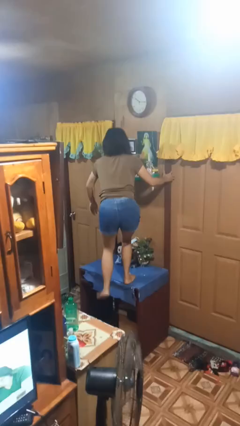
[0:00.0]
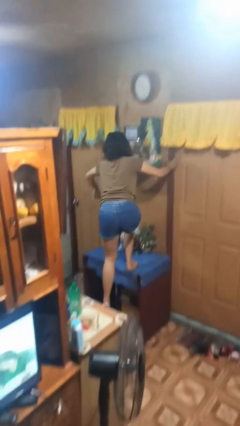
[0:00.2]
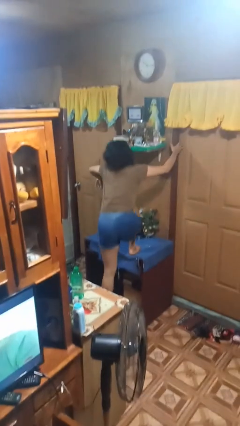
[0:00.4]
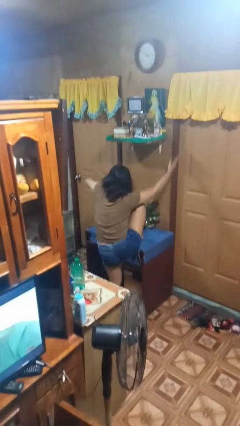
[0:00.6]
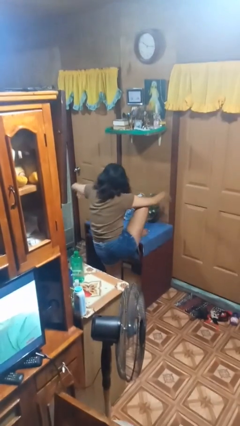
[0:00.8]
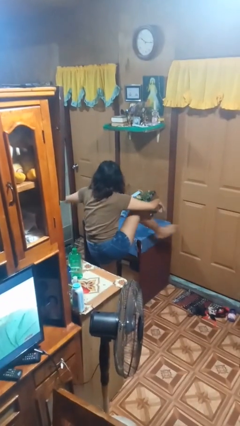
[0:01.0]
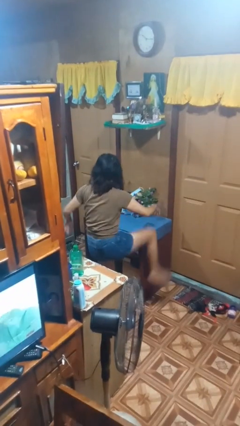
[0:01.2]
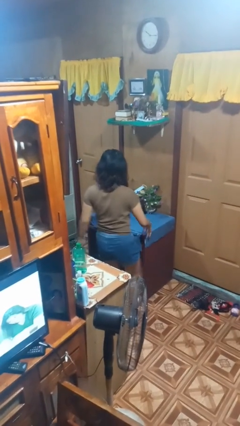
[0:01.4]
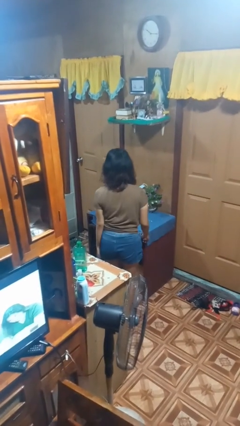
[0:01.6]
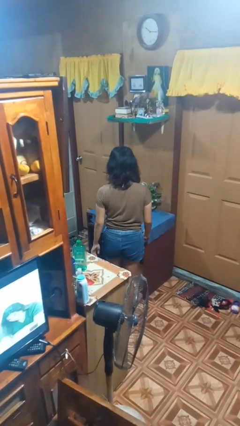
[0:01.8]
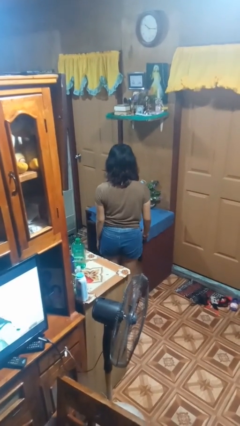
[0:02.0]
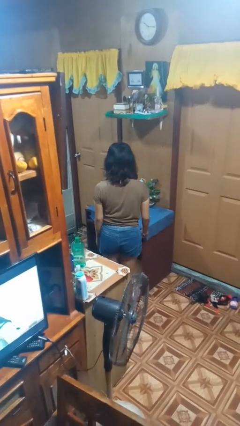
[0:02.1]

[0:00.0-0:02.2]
person climbs off table

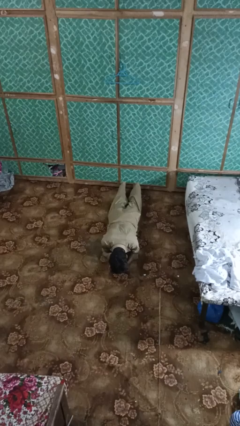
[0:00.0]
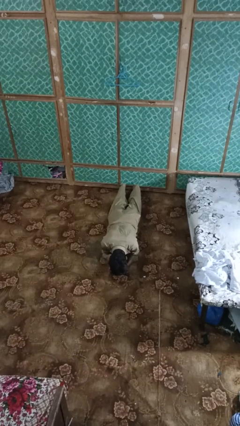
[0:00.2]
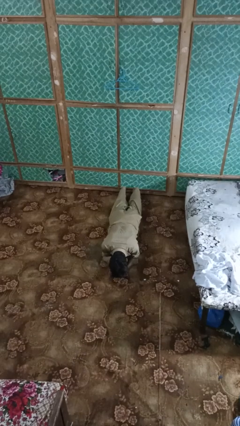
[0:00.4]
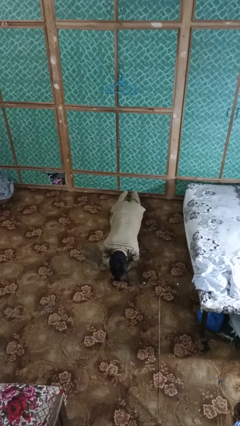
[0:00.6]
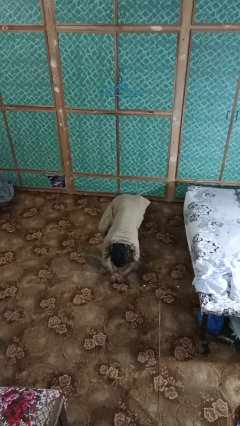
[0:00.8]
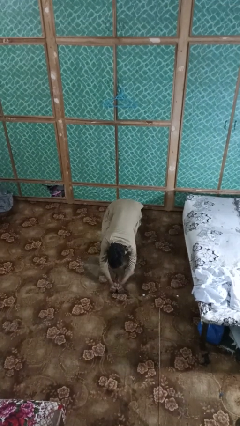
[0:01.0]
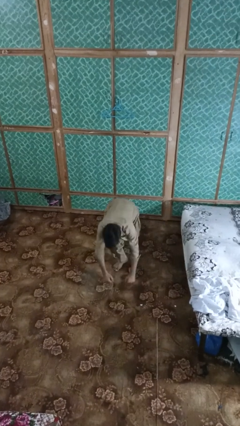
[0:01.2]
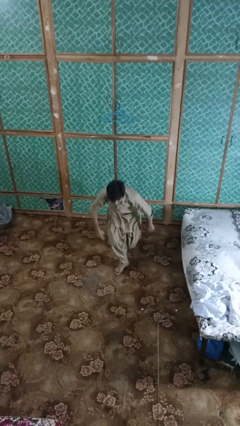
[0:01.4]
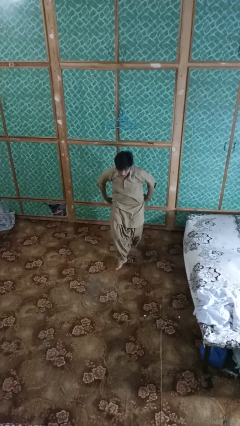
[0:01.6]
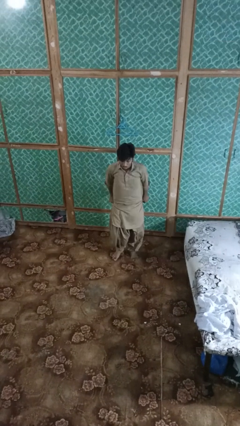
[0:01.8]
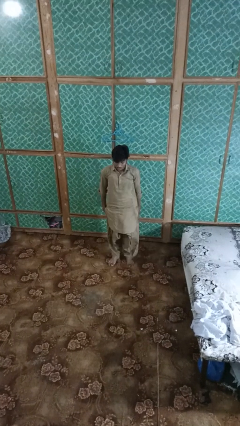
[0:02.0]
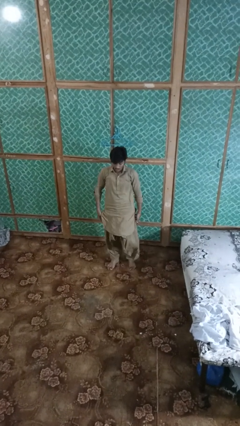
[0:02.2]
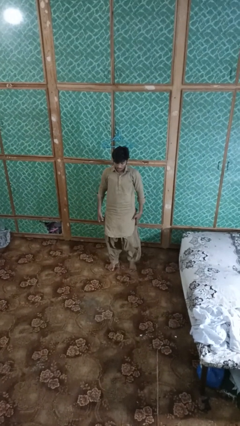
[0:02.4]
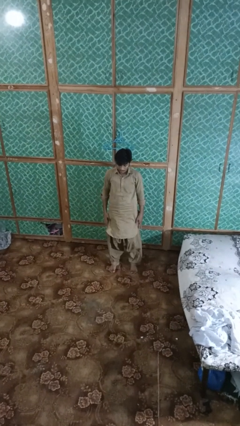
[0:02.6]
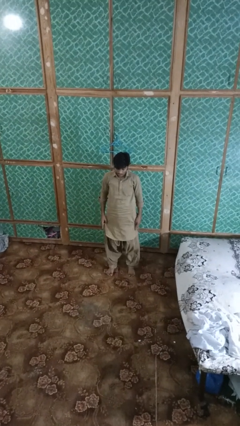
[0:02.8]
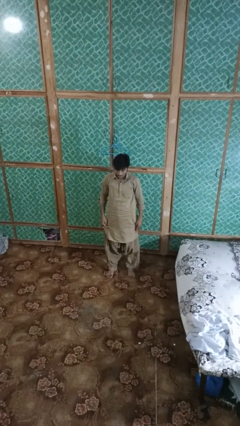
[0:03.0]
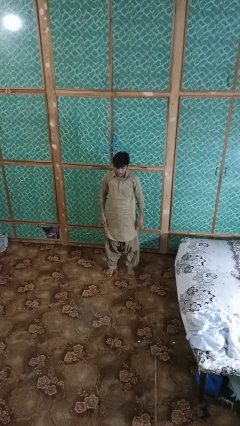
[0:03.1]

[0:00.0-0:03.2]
person stands up from floor

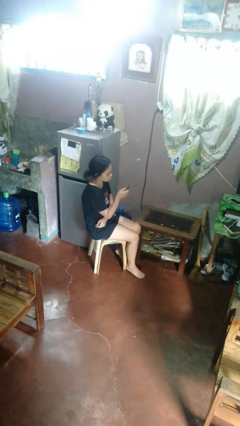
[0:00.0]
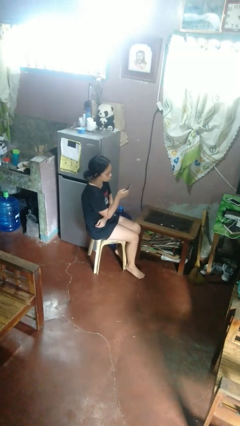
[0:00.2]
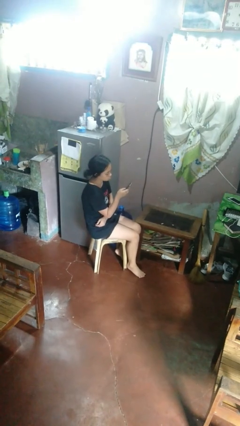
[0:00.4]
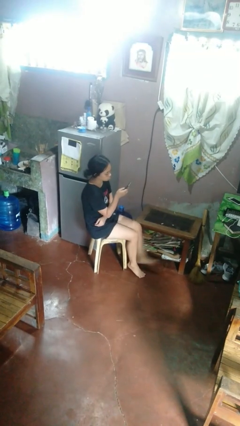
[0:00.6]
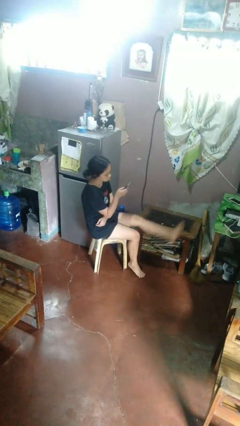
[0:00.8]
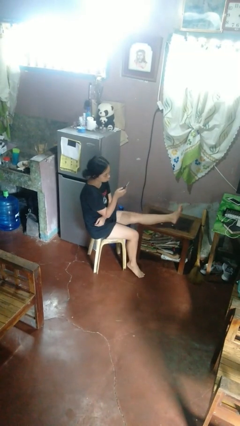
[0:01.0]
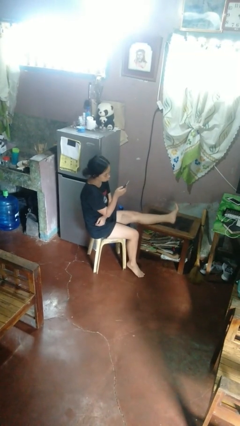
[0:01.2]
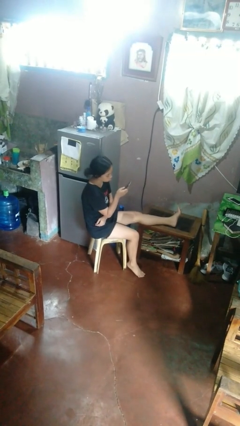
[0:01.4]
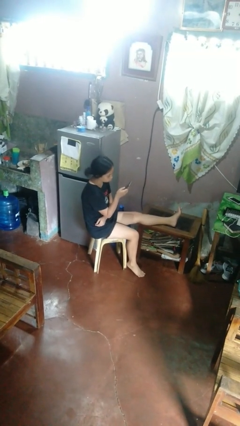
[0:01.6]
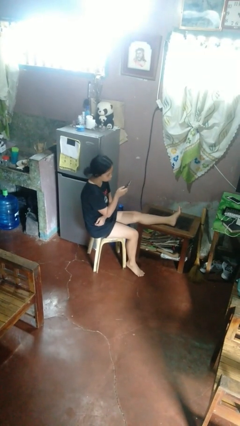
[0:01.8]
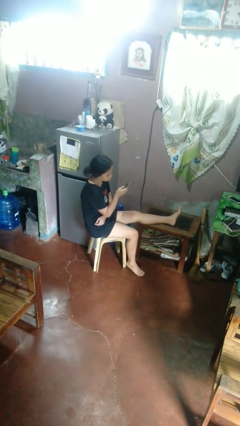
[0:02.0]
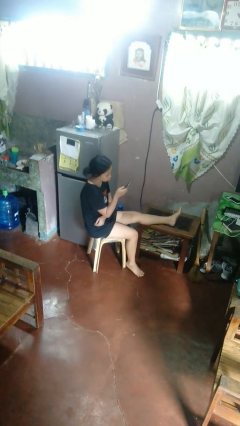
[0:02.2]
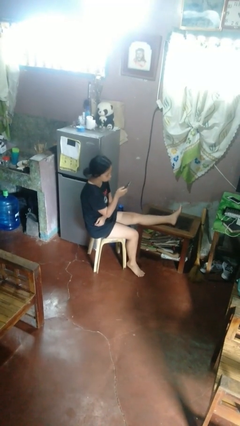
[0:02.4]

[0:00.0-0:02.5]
person puts feet up

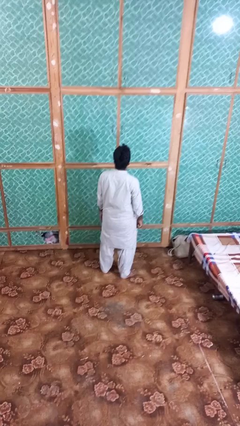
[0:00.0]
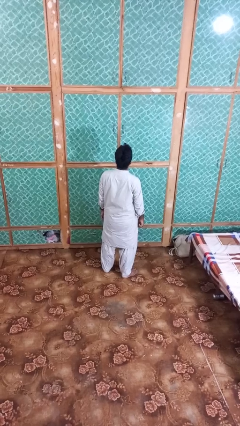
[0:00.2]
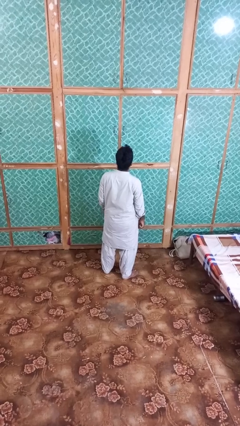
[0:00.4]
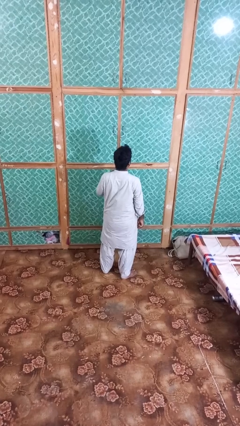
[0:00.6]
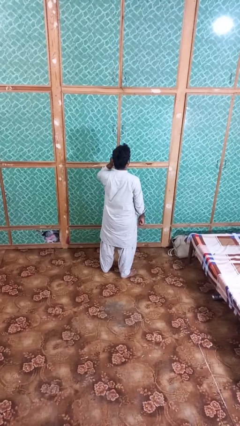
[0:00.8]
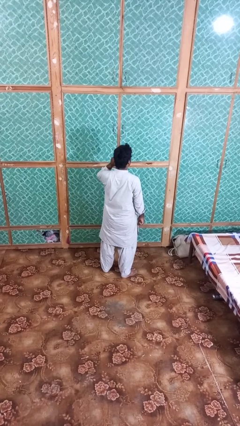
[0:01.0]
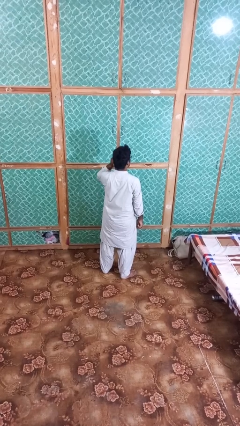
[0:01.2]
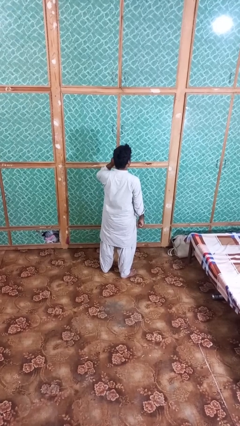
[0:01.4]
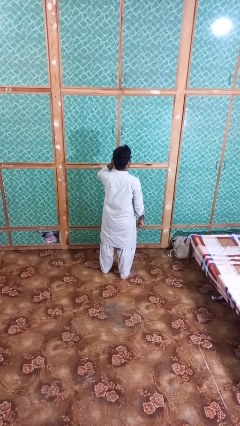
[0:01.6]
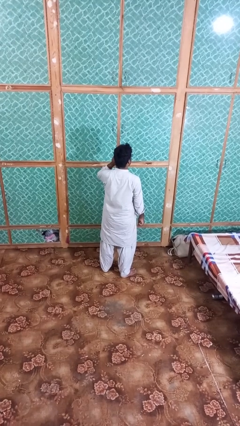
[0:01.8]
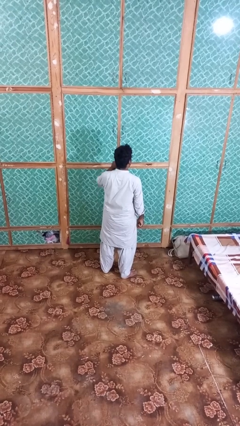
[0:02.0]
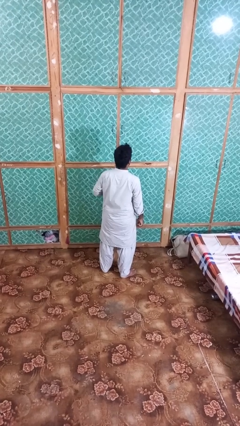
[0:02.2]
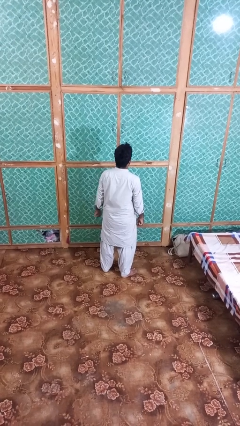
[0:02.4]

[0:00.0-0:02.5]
person touches earlobe

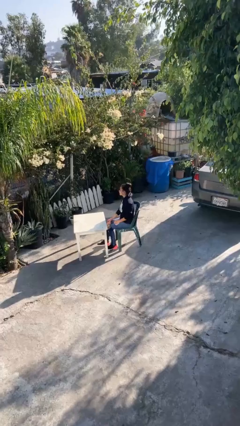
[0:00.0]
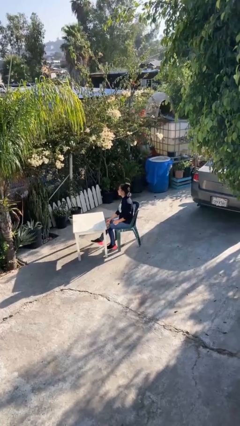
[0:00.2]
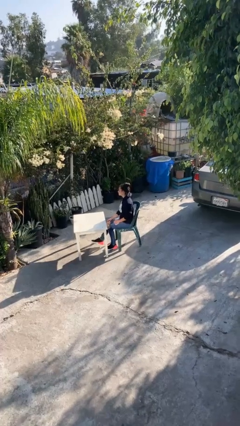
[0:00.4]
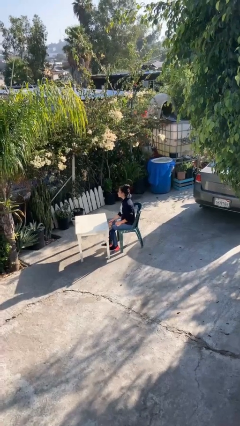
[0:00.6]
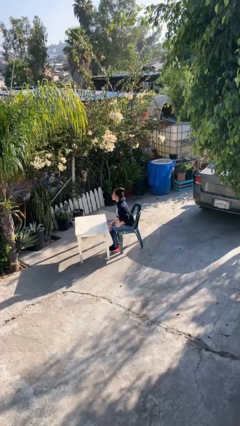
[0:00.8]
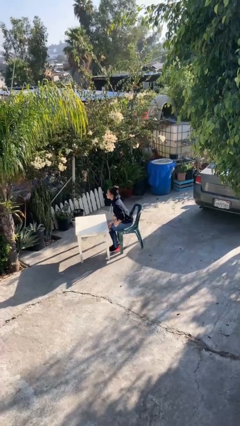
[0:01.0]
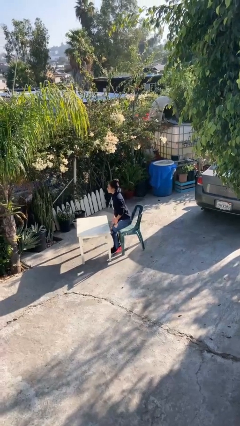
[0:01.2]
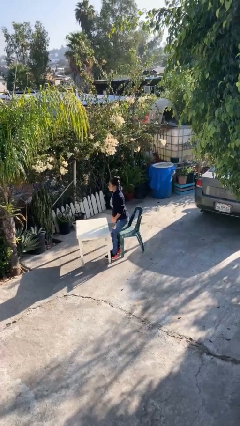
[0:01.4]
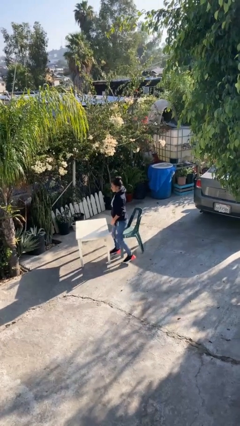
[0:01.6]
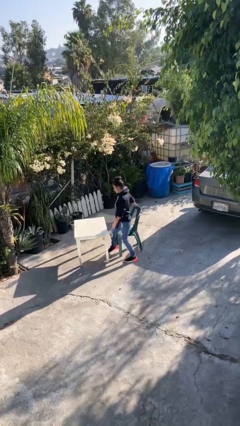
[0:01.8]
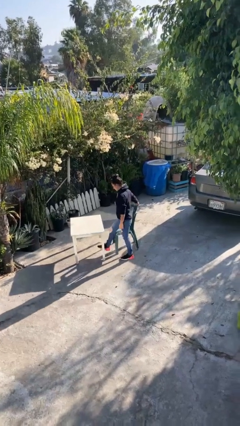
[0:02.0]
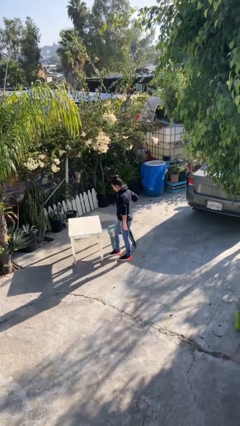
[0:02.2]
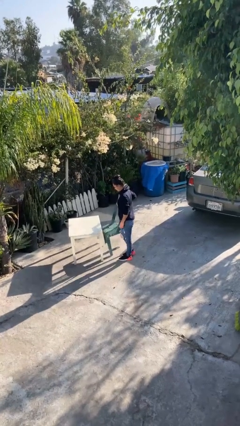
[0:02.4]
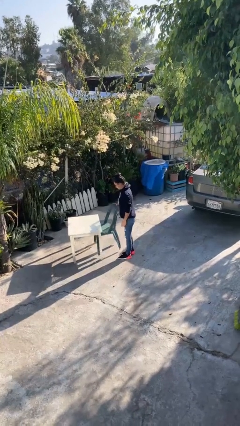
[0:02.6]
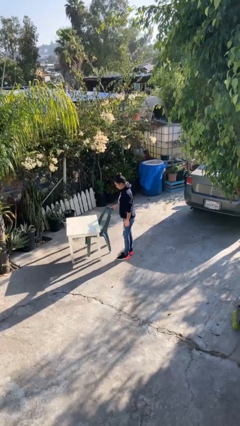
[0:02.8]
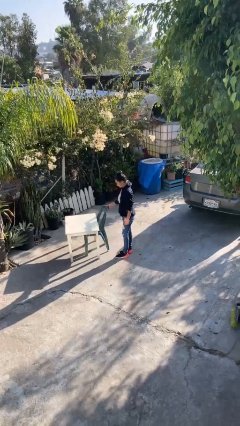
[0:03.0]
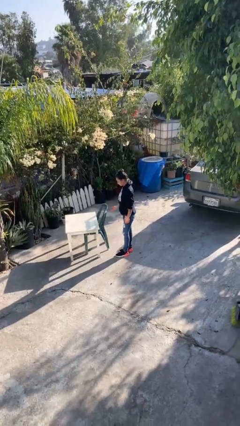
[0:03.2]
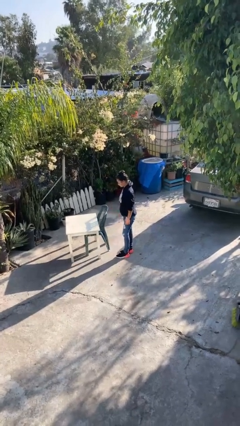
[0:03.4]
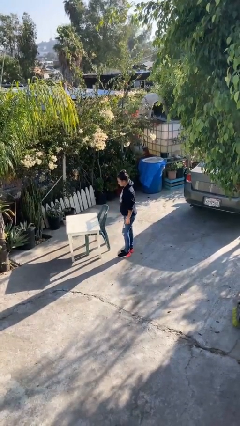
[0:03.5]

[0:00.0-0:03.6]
person stands up

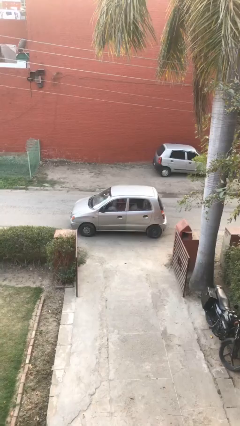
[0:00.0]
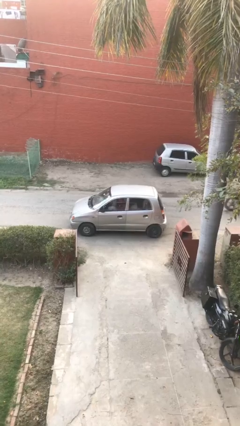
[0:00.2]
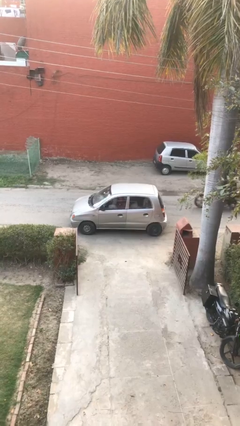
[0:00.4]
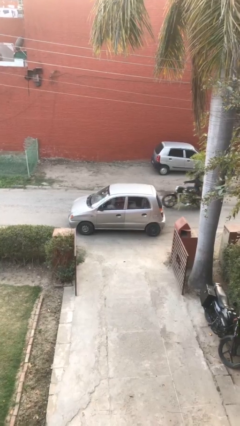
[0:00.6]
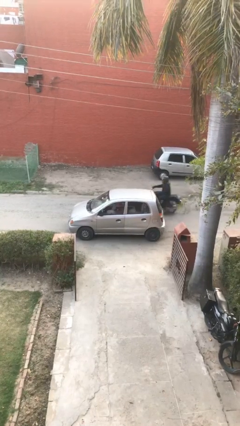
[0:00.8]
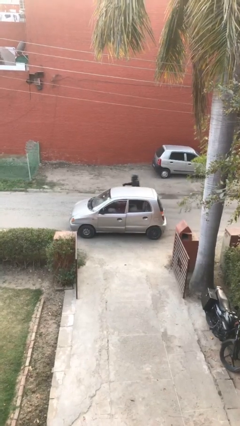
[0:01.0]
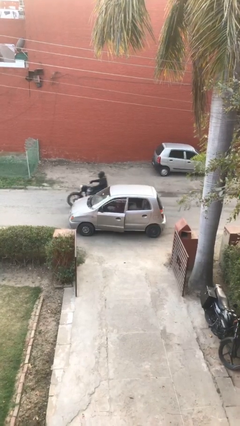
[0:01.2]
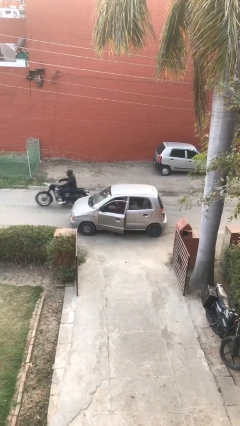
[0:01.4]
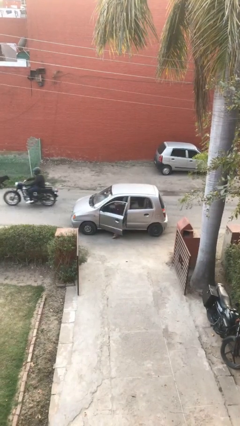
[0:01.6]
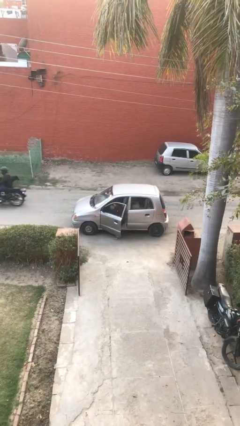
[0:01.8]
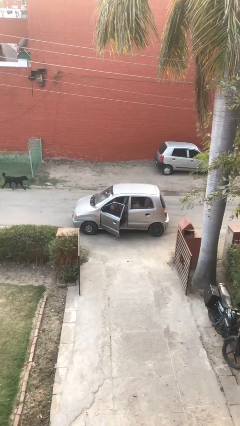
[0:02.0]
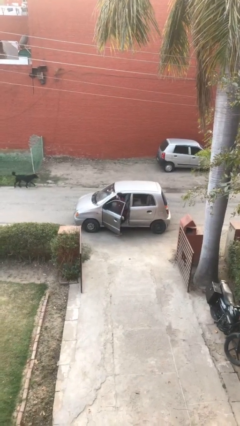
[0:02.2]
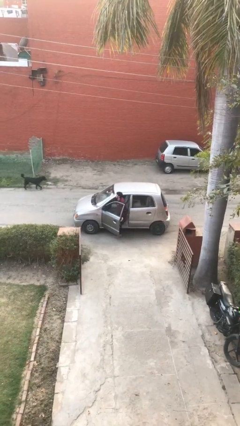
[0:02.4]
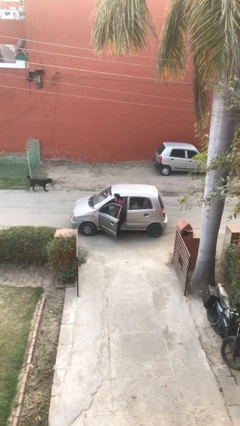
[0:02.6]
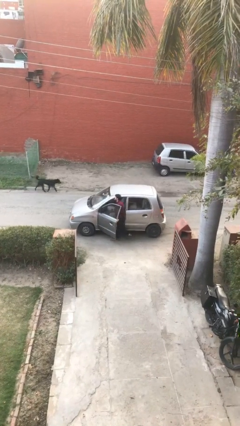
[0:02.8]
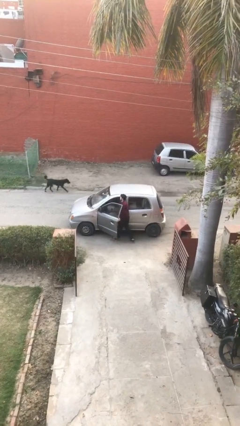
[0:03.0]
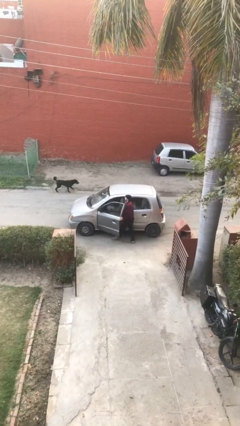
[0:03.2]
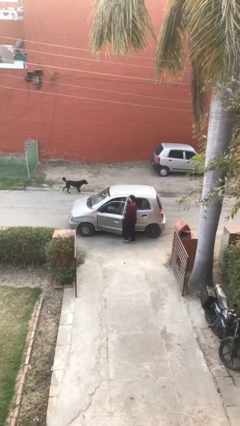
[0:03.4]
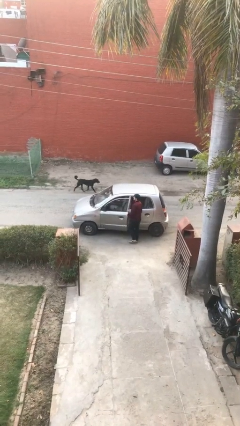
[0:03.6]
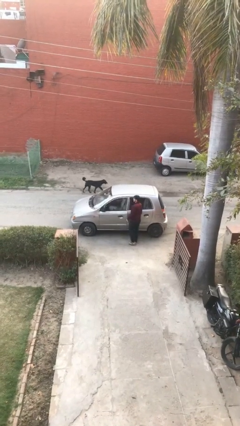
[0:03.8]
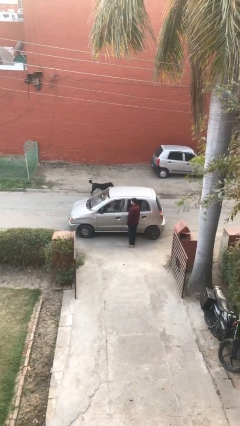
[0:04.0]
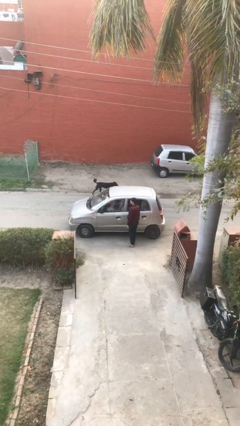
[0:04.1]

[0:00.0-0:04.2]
car drops off person
